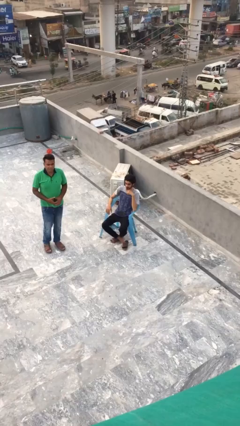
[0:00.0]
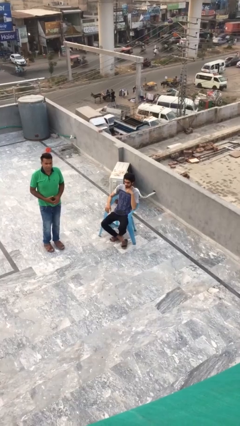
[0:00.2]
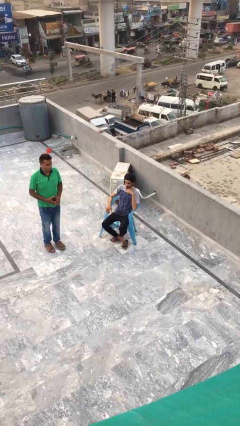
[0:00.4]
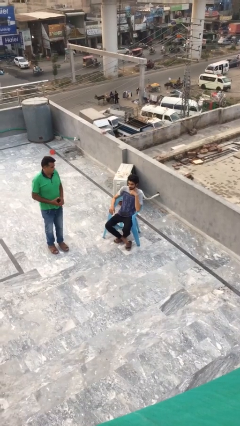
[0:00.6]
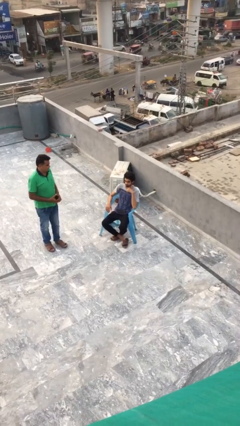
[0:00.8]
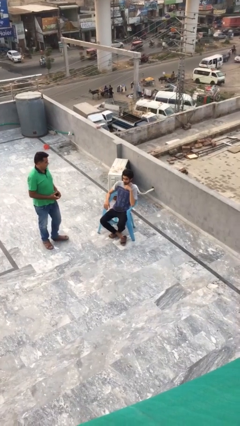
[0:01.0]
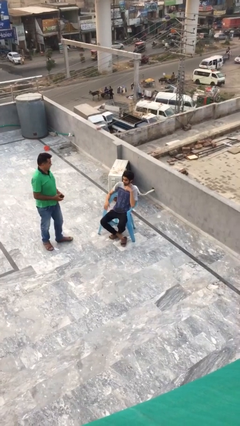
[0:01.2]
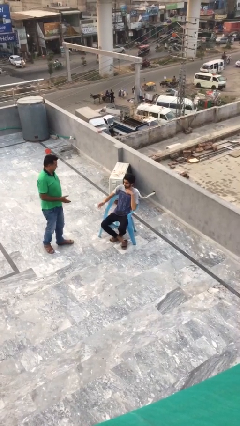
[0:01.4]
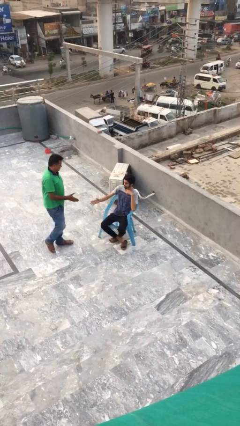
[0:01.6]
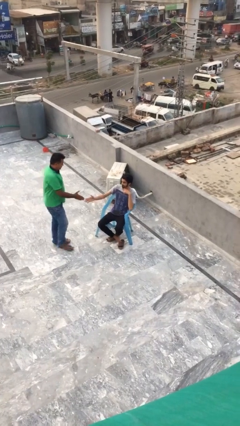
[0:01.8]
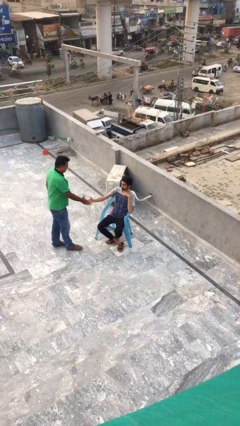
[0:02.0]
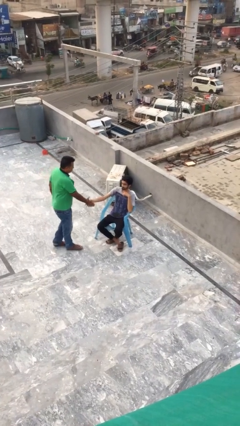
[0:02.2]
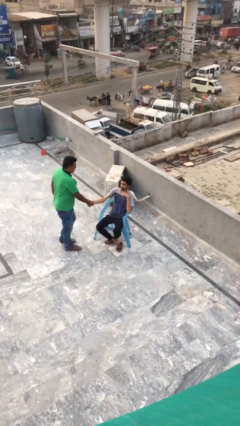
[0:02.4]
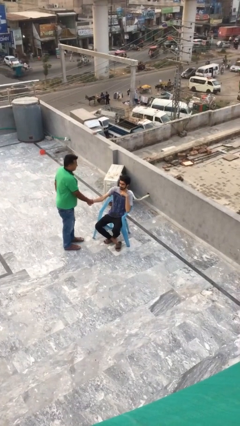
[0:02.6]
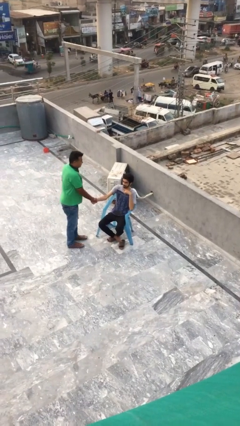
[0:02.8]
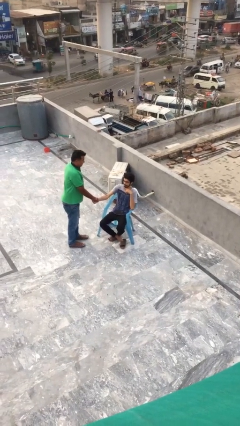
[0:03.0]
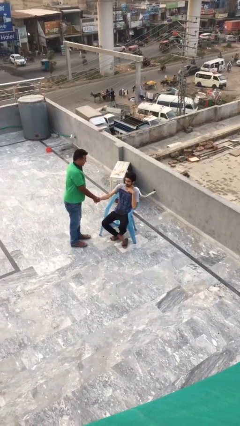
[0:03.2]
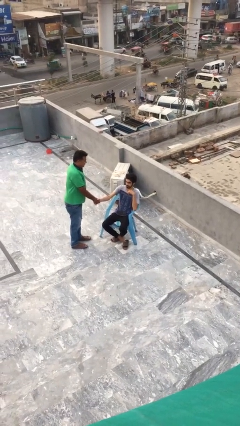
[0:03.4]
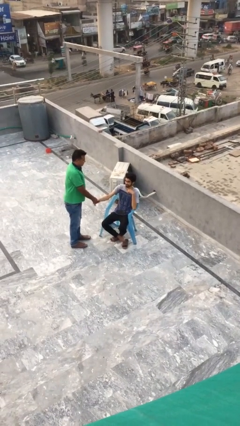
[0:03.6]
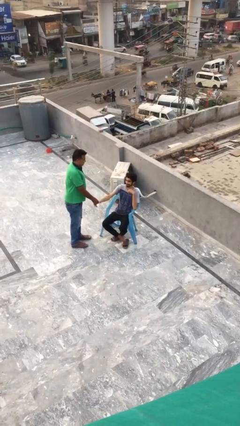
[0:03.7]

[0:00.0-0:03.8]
person shakes hand

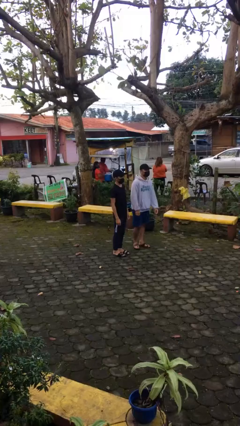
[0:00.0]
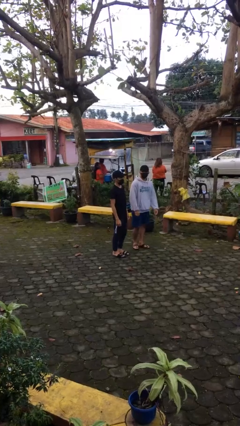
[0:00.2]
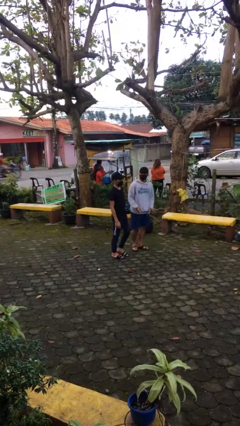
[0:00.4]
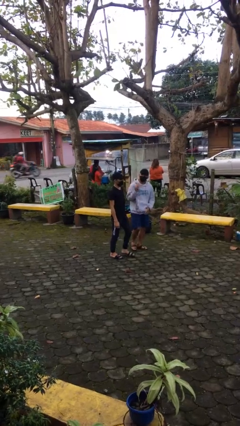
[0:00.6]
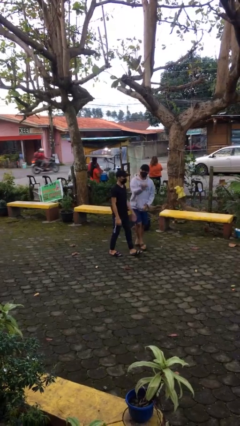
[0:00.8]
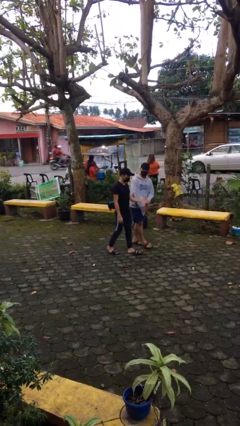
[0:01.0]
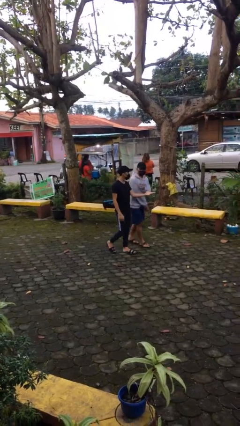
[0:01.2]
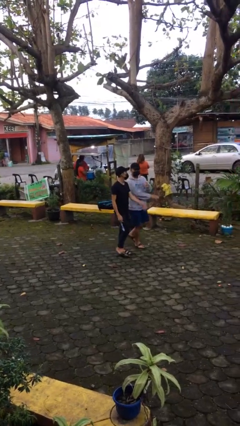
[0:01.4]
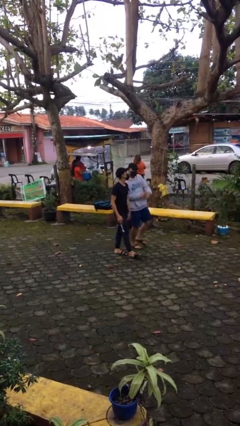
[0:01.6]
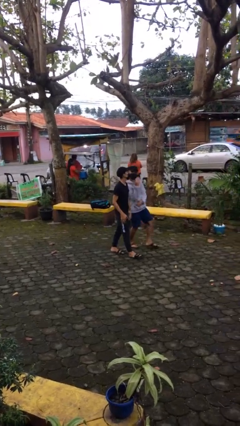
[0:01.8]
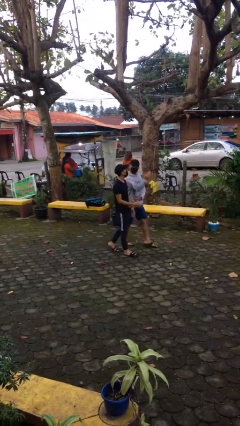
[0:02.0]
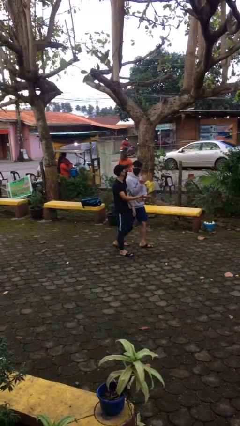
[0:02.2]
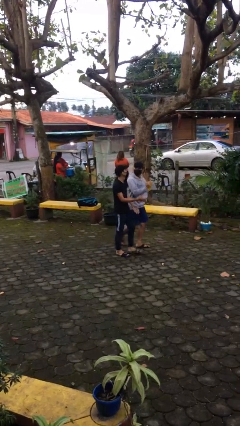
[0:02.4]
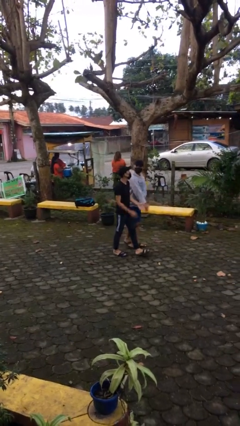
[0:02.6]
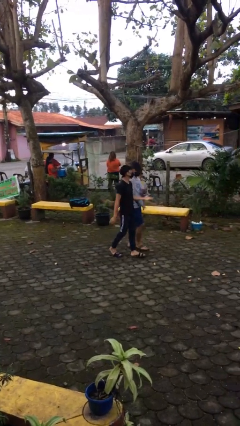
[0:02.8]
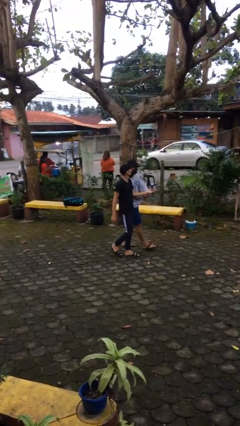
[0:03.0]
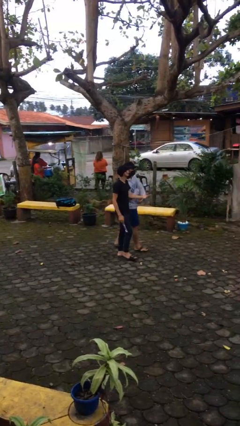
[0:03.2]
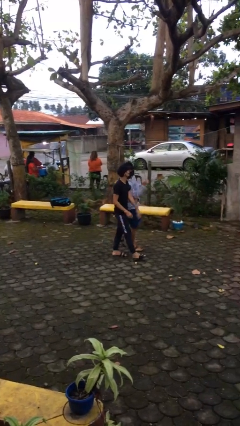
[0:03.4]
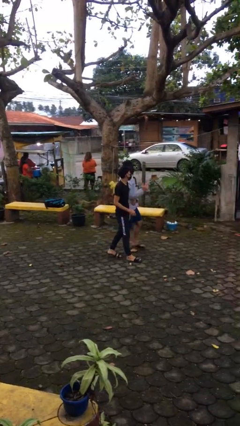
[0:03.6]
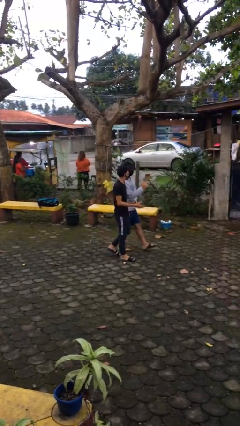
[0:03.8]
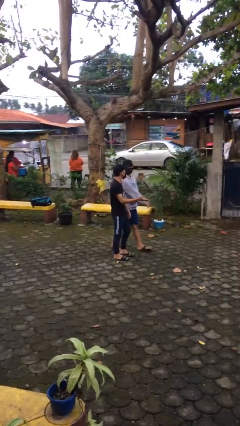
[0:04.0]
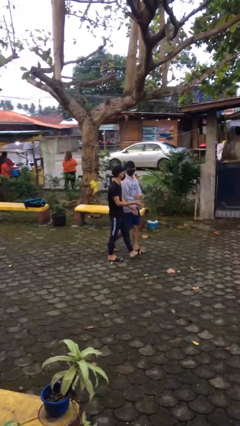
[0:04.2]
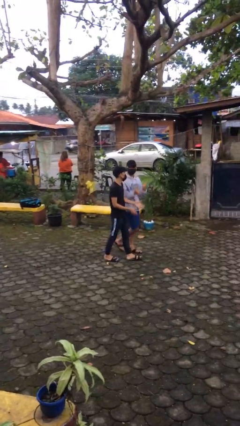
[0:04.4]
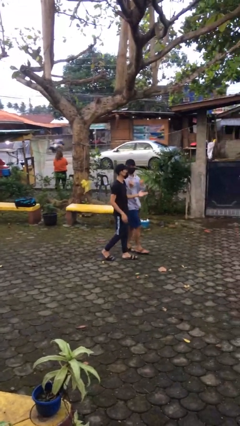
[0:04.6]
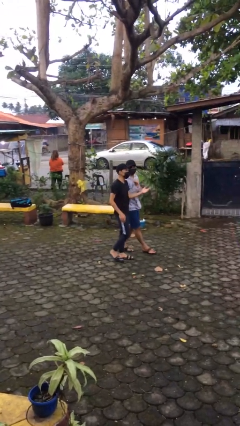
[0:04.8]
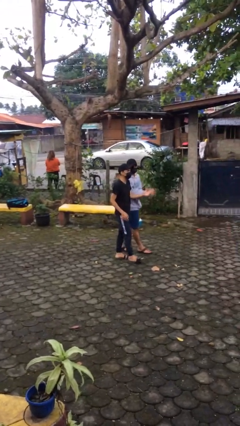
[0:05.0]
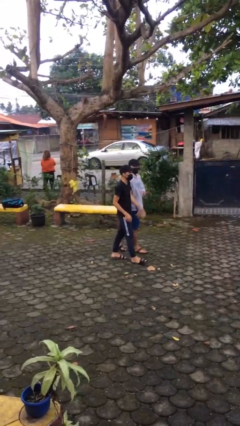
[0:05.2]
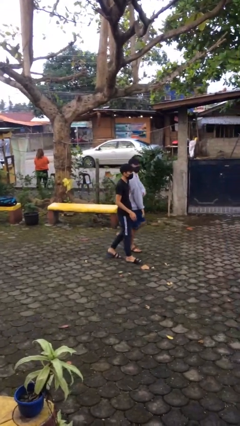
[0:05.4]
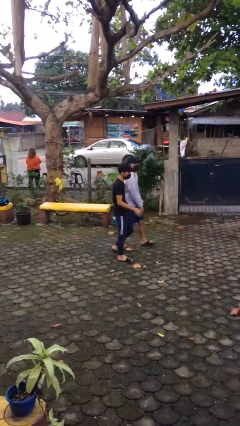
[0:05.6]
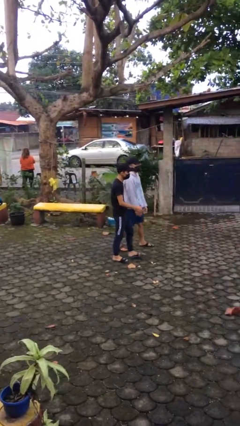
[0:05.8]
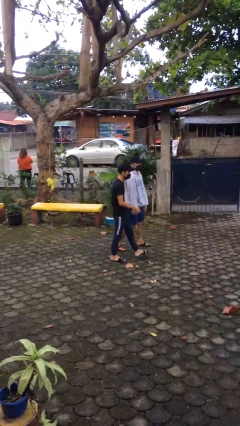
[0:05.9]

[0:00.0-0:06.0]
person talks to person

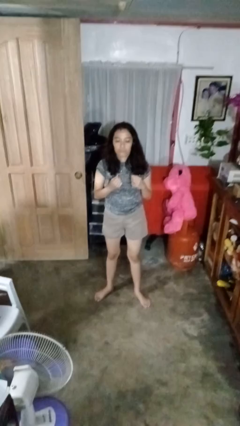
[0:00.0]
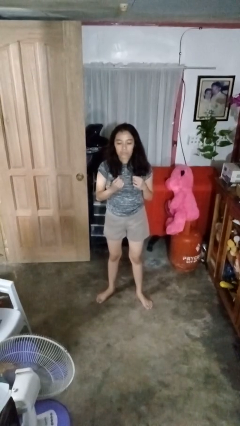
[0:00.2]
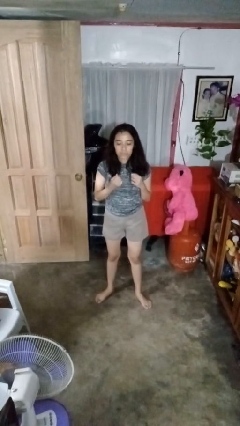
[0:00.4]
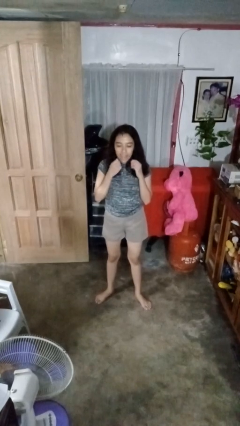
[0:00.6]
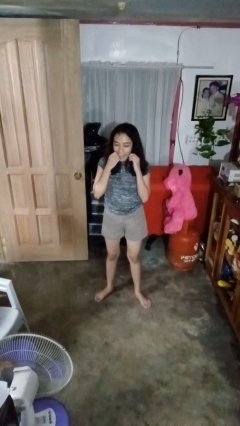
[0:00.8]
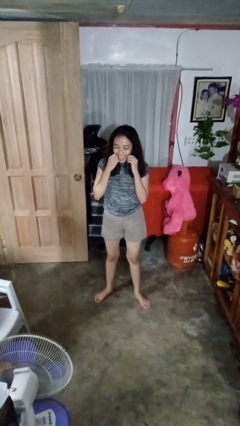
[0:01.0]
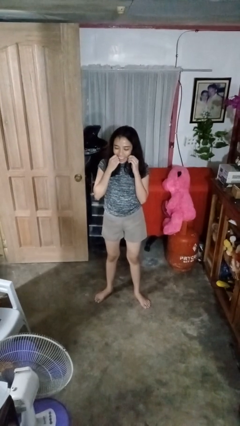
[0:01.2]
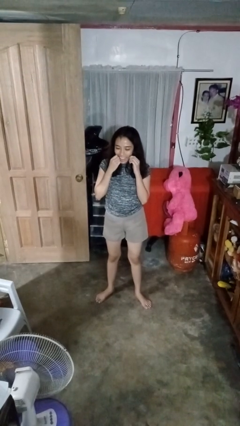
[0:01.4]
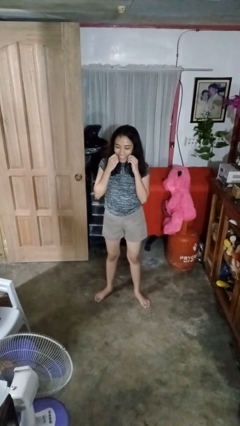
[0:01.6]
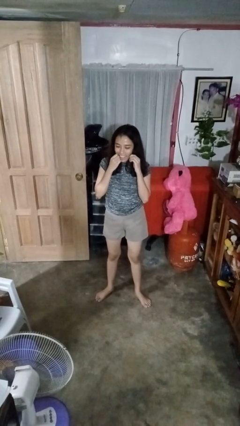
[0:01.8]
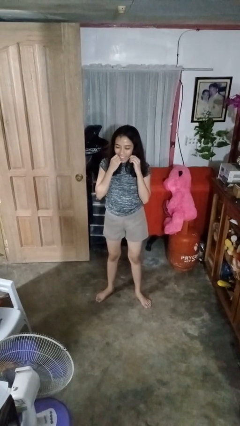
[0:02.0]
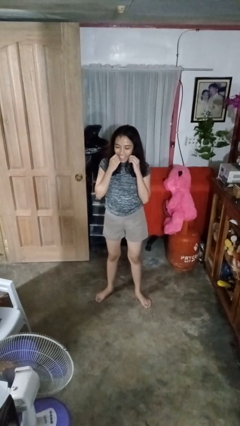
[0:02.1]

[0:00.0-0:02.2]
person flosses

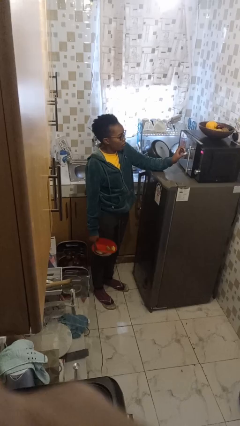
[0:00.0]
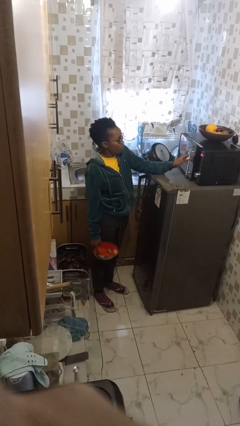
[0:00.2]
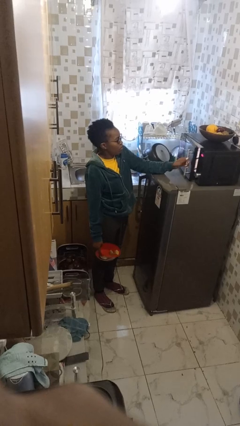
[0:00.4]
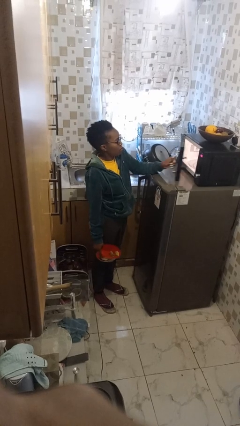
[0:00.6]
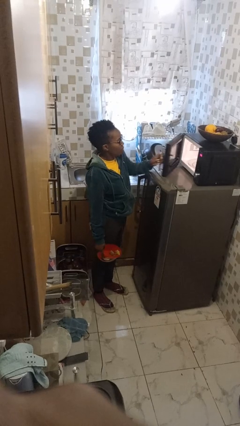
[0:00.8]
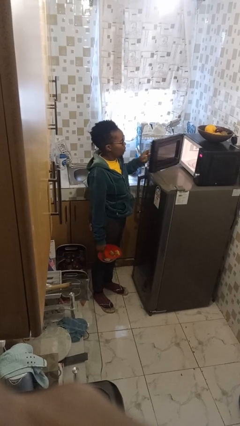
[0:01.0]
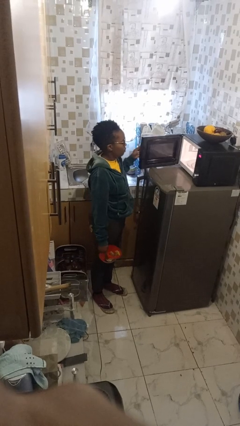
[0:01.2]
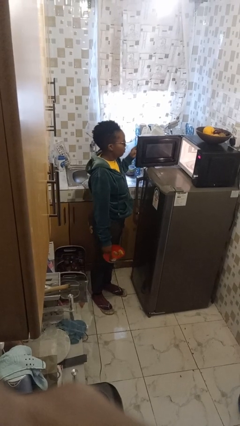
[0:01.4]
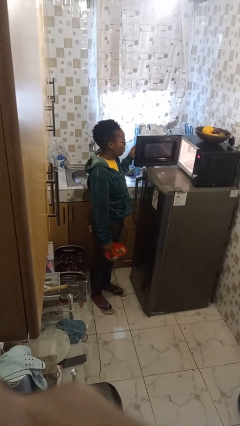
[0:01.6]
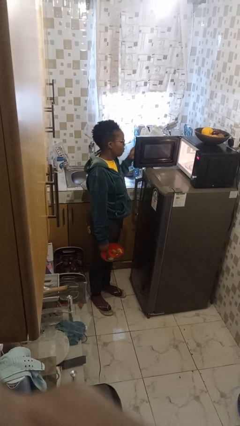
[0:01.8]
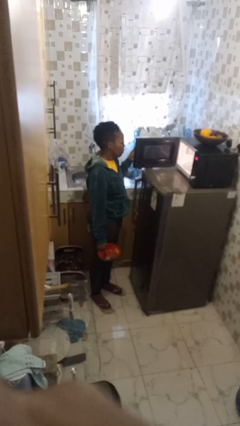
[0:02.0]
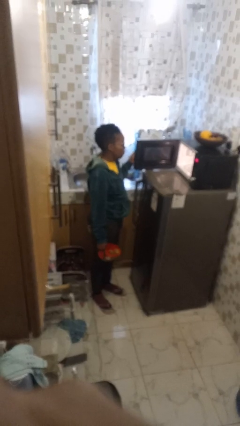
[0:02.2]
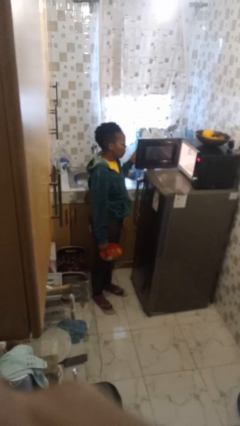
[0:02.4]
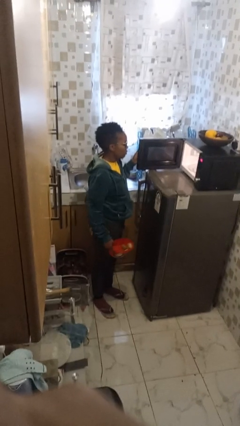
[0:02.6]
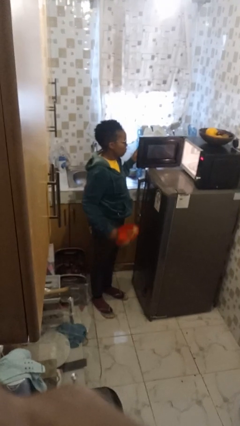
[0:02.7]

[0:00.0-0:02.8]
person opens microwave

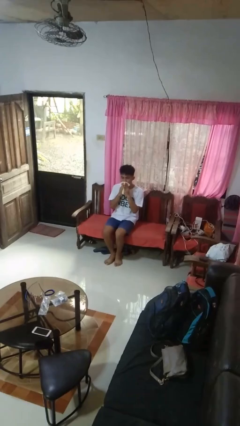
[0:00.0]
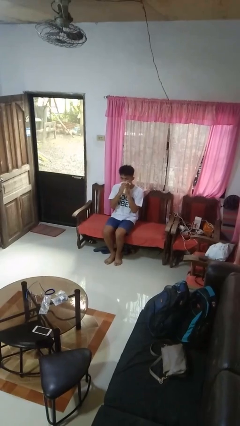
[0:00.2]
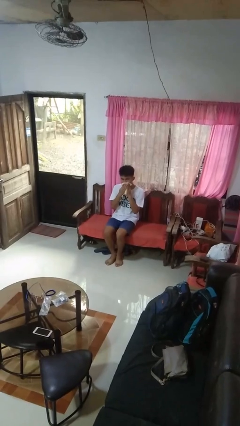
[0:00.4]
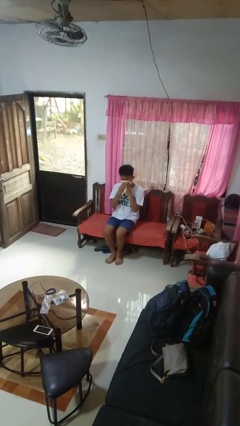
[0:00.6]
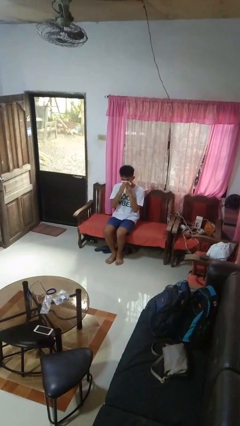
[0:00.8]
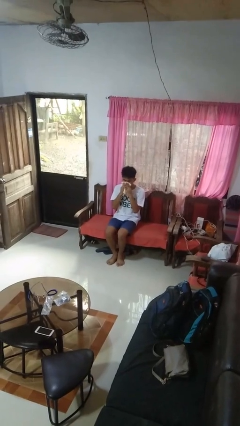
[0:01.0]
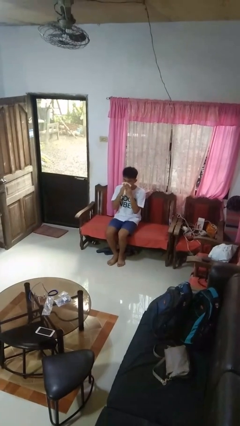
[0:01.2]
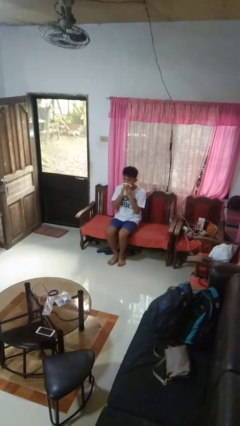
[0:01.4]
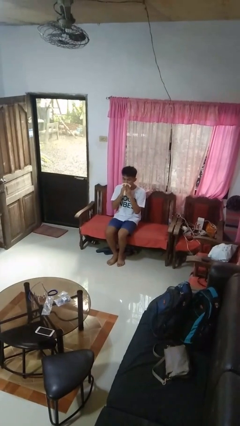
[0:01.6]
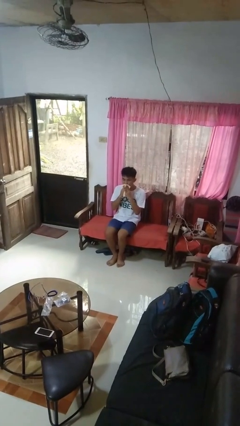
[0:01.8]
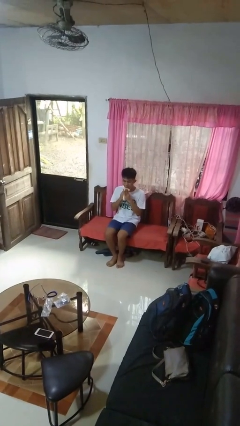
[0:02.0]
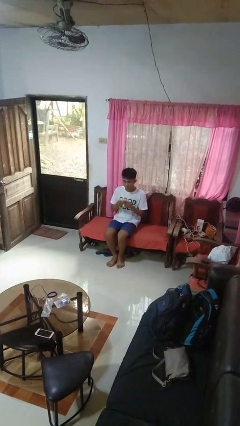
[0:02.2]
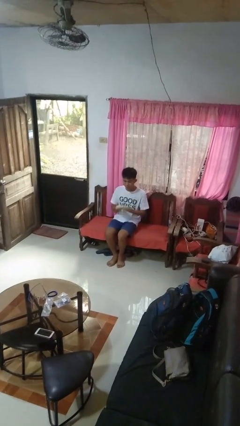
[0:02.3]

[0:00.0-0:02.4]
person wipes mouth with napkin

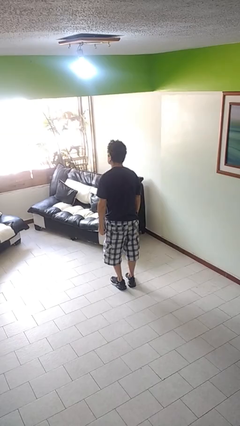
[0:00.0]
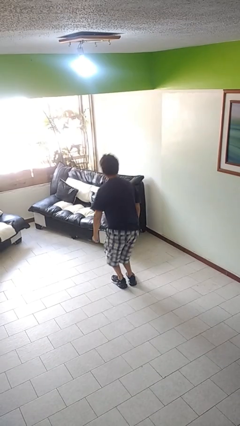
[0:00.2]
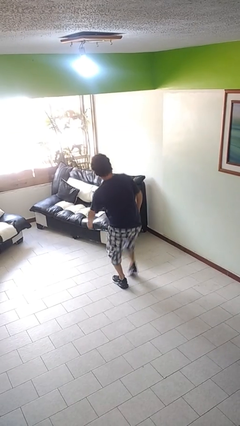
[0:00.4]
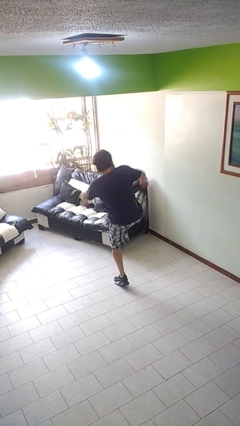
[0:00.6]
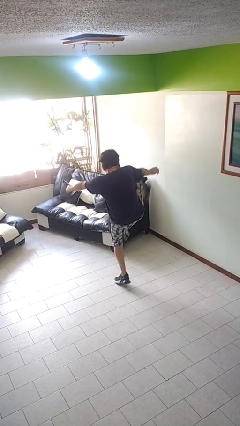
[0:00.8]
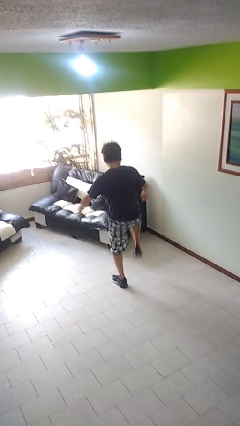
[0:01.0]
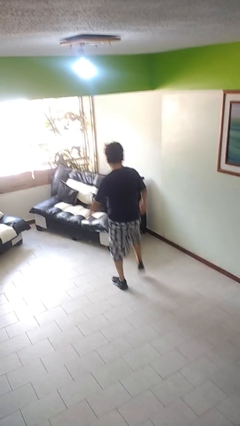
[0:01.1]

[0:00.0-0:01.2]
person karate kicks
